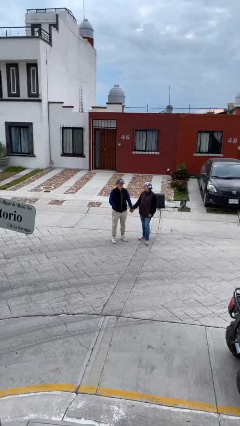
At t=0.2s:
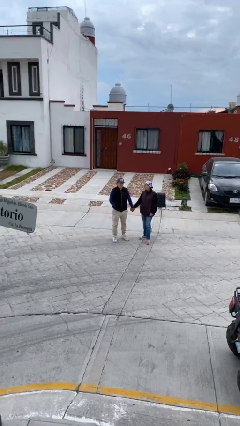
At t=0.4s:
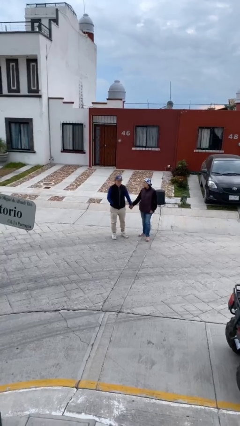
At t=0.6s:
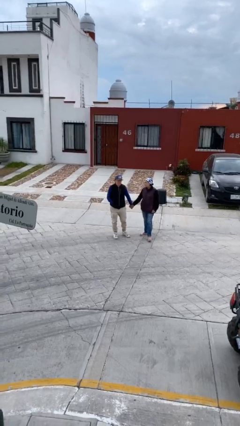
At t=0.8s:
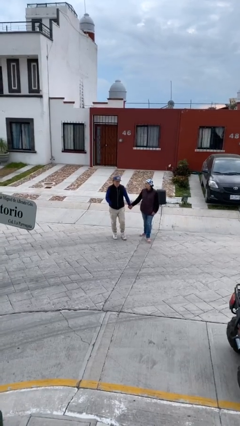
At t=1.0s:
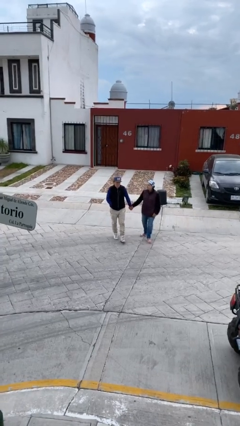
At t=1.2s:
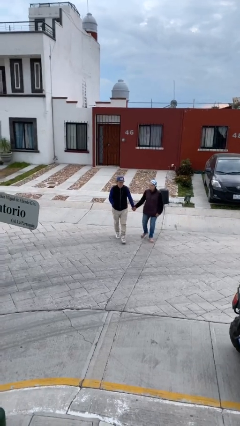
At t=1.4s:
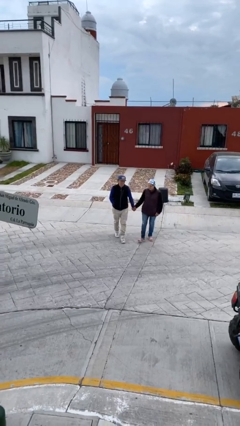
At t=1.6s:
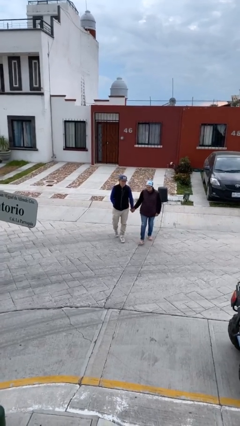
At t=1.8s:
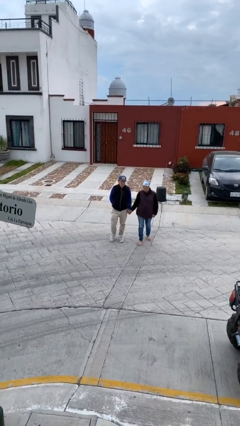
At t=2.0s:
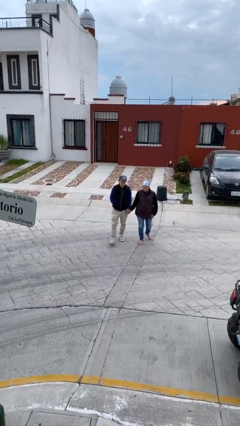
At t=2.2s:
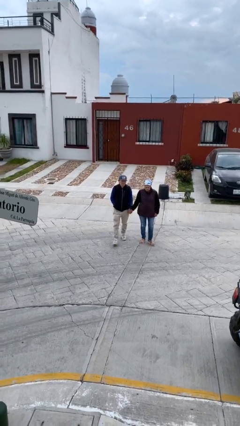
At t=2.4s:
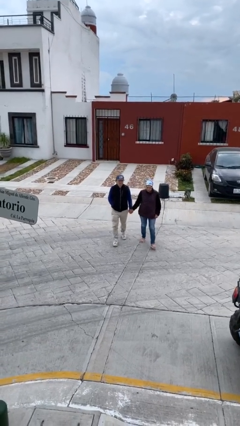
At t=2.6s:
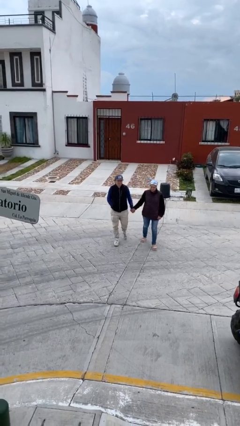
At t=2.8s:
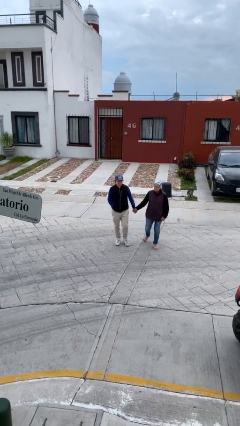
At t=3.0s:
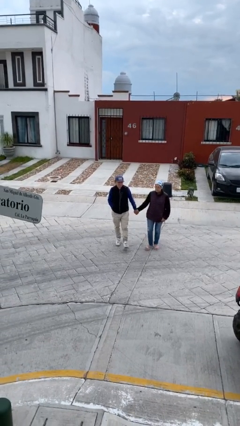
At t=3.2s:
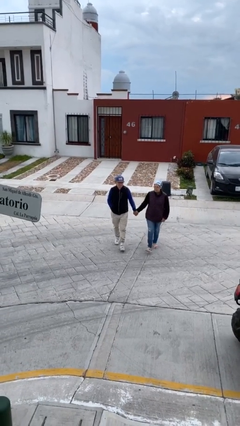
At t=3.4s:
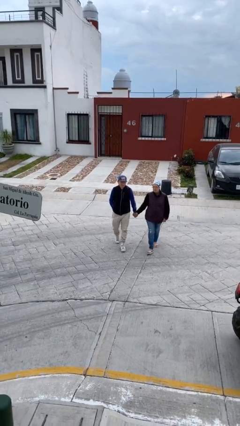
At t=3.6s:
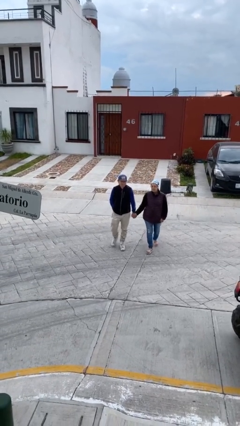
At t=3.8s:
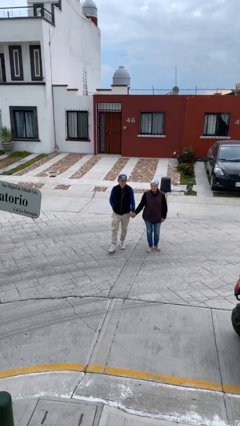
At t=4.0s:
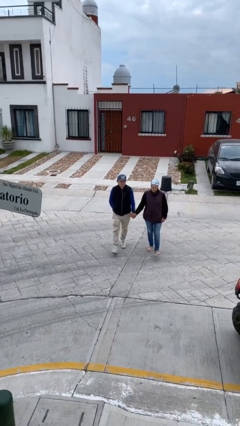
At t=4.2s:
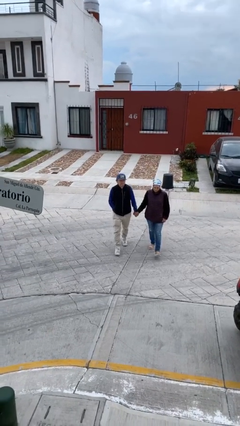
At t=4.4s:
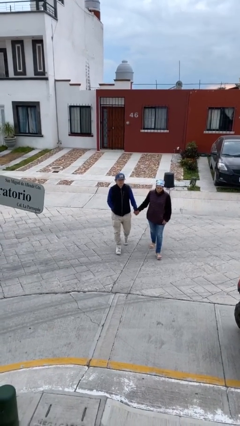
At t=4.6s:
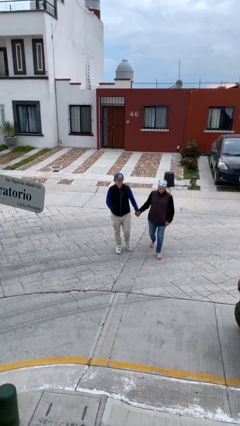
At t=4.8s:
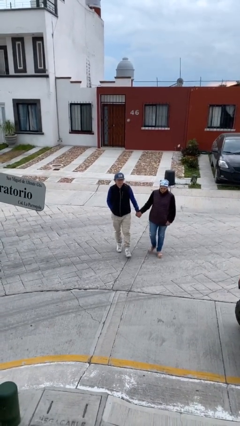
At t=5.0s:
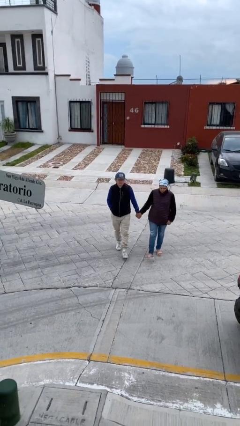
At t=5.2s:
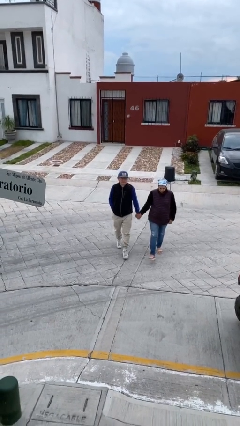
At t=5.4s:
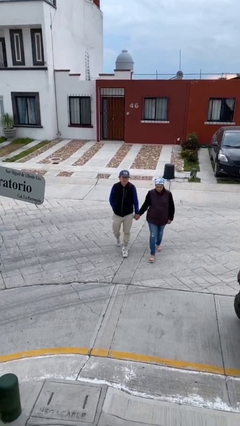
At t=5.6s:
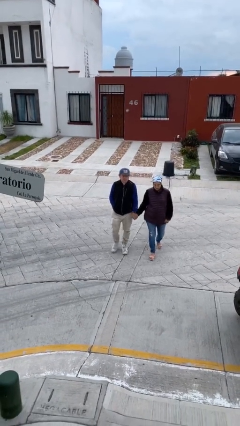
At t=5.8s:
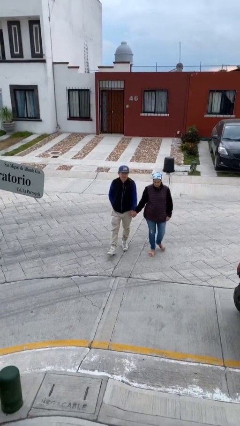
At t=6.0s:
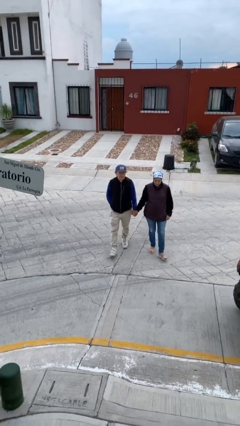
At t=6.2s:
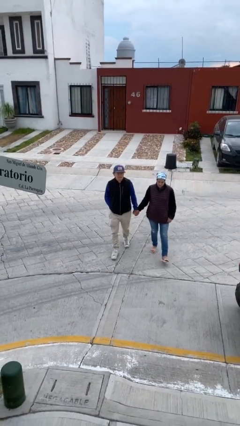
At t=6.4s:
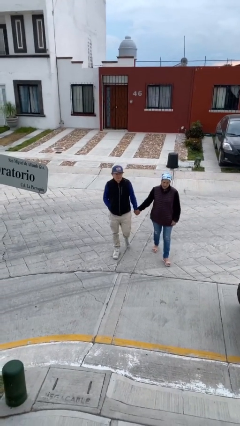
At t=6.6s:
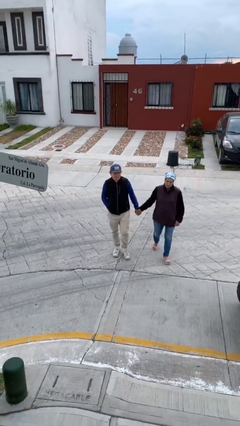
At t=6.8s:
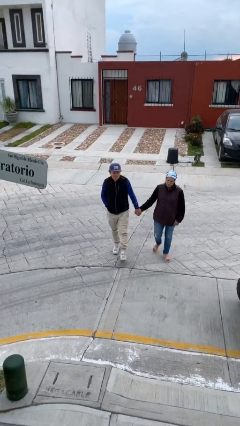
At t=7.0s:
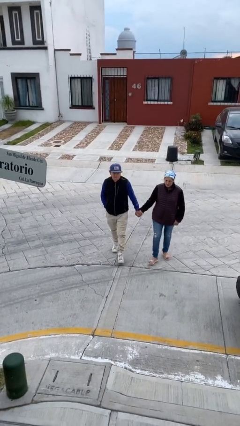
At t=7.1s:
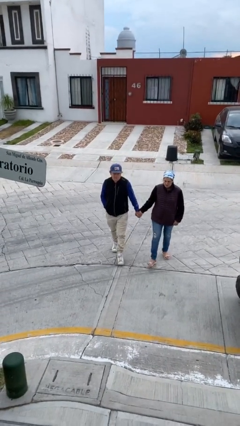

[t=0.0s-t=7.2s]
person holds hand

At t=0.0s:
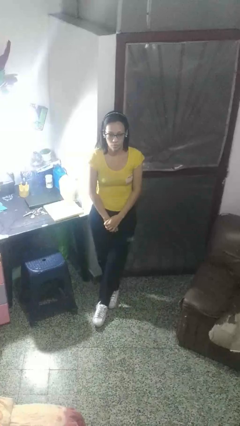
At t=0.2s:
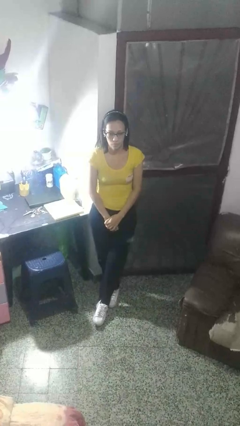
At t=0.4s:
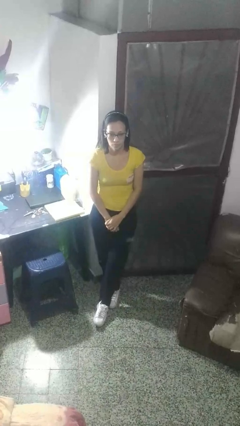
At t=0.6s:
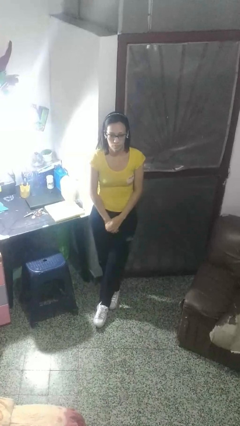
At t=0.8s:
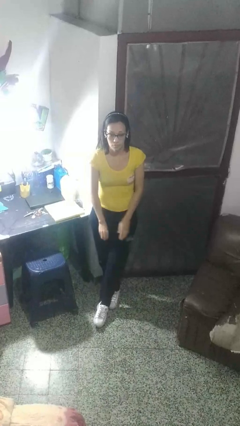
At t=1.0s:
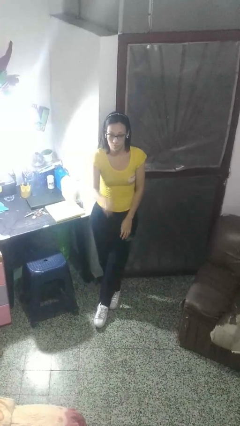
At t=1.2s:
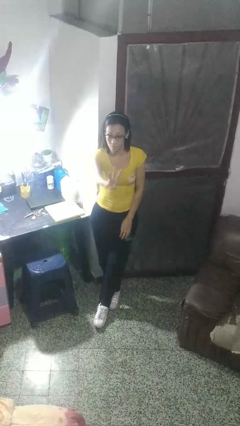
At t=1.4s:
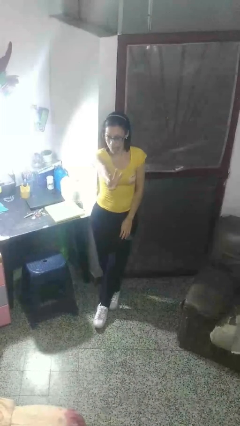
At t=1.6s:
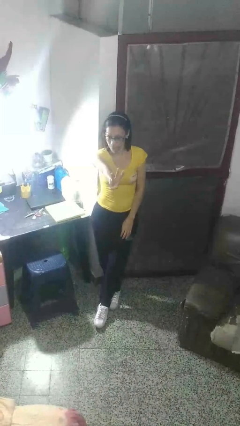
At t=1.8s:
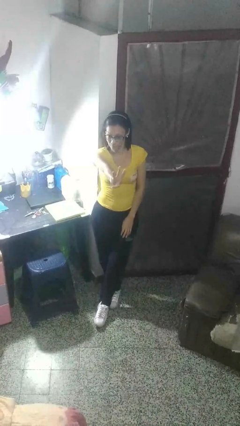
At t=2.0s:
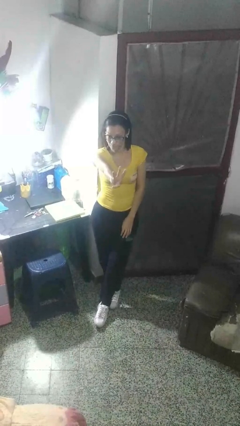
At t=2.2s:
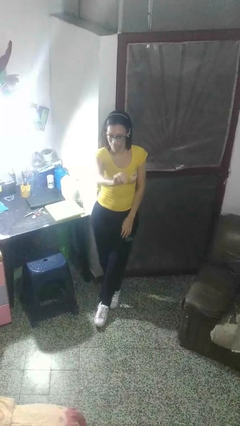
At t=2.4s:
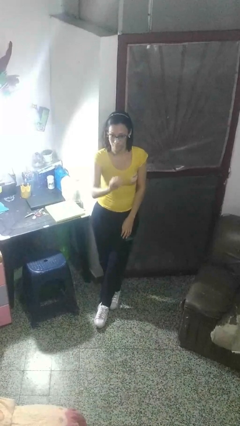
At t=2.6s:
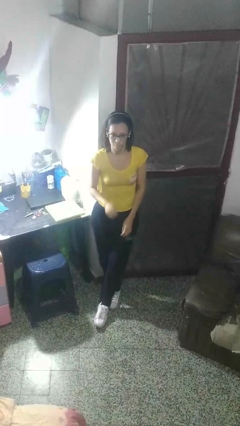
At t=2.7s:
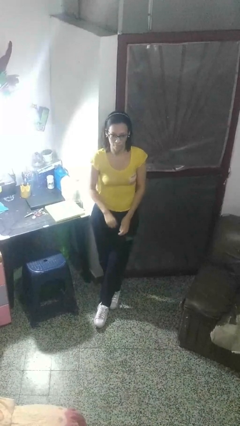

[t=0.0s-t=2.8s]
person gestures number three

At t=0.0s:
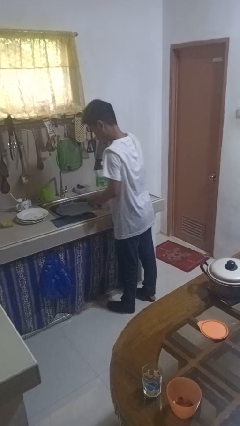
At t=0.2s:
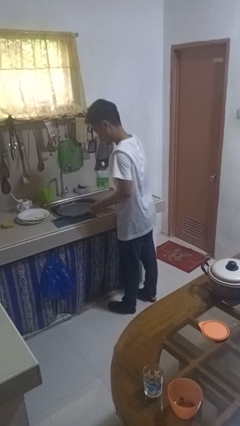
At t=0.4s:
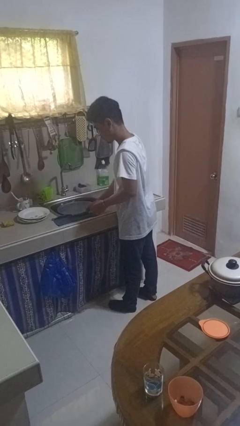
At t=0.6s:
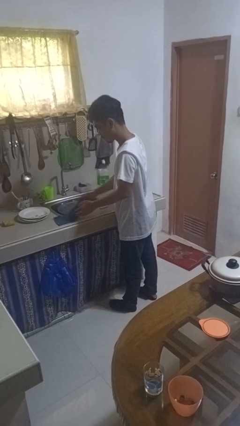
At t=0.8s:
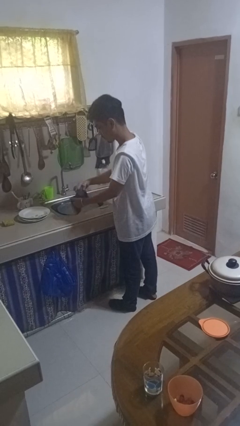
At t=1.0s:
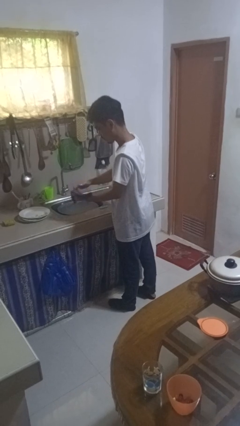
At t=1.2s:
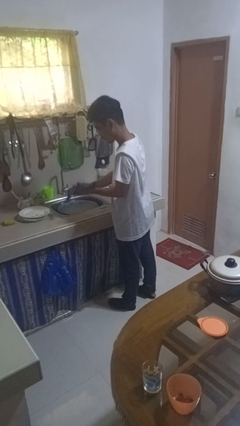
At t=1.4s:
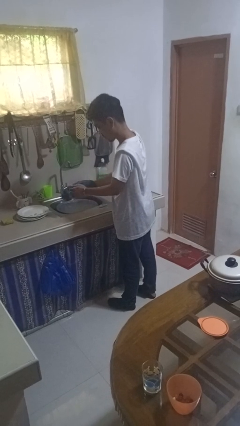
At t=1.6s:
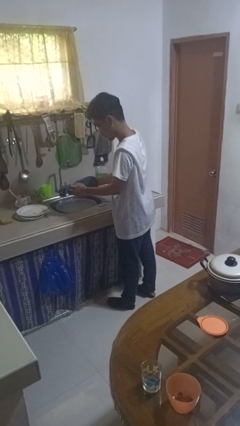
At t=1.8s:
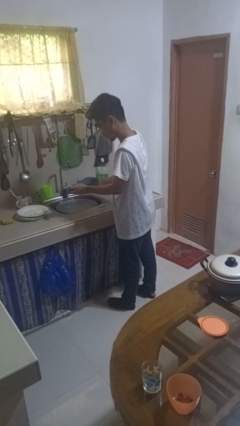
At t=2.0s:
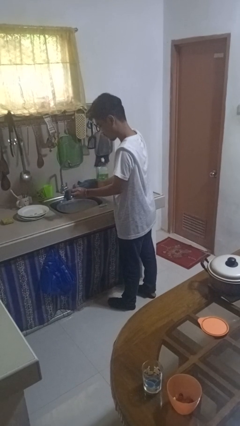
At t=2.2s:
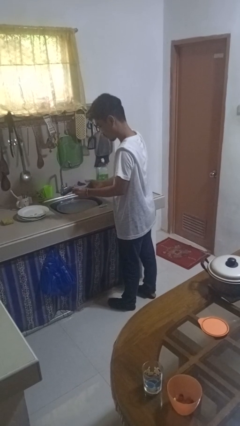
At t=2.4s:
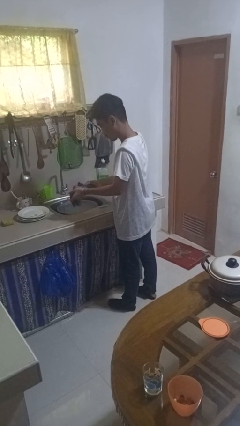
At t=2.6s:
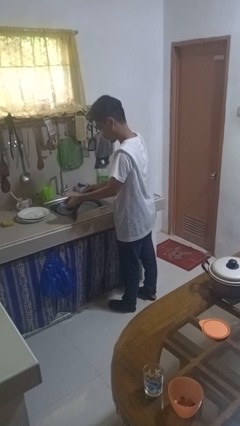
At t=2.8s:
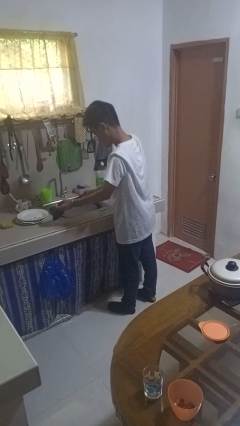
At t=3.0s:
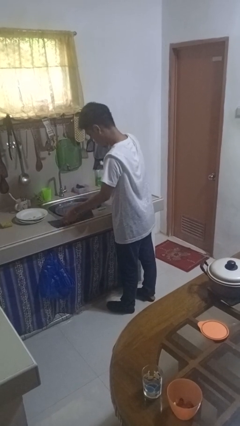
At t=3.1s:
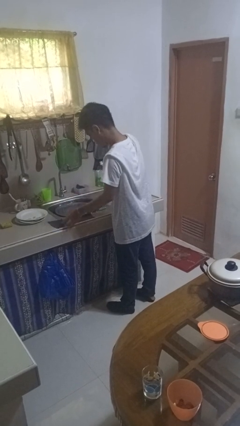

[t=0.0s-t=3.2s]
person dries hands with towel

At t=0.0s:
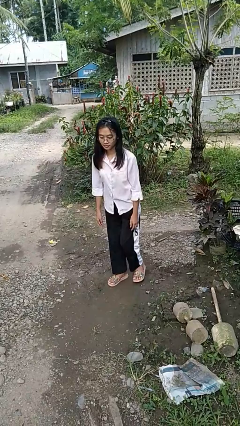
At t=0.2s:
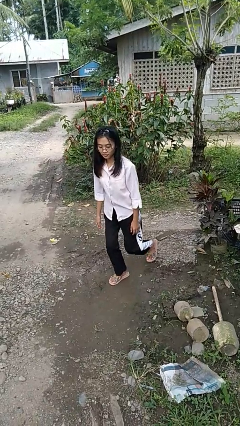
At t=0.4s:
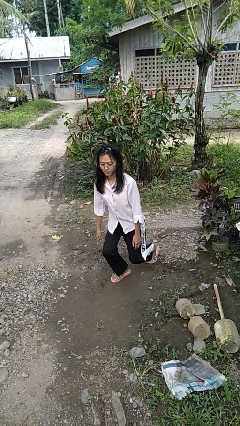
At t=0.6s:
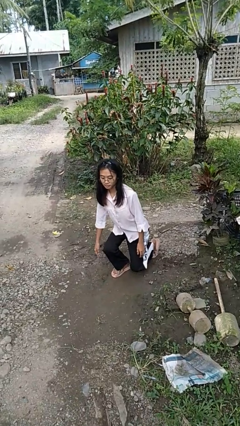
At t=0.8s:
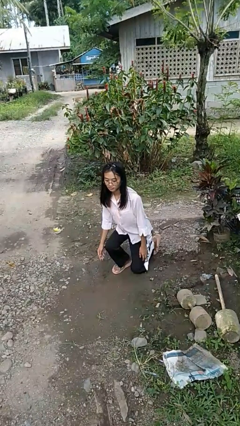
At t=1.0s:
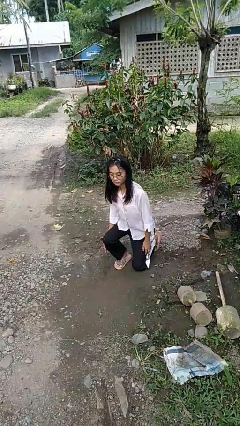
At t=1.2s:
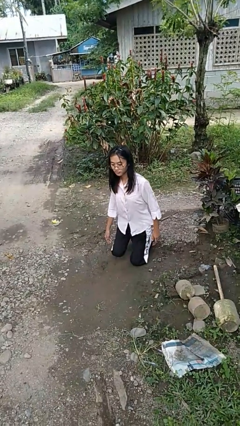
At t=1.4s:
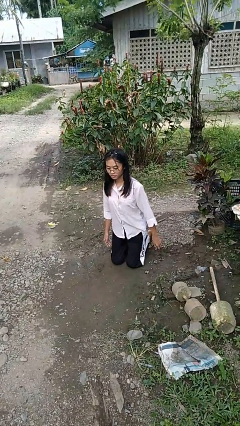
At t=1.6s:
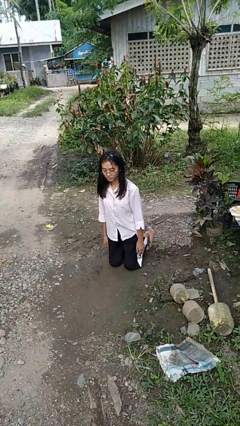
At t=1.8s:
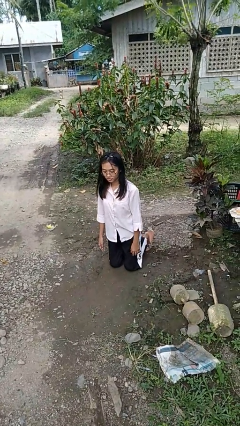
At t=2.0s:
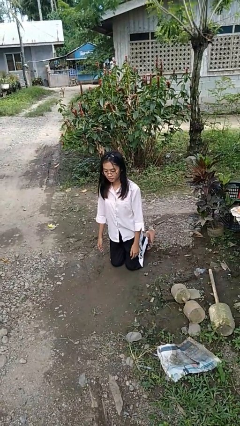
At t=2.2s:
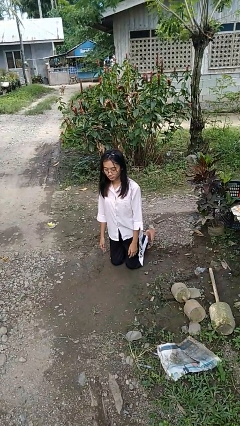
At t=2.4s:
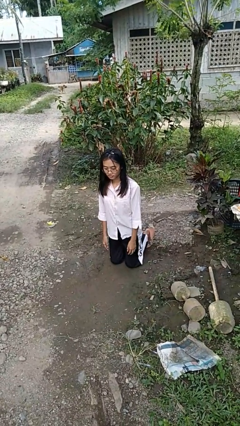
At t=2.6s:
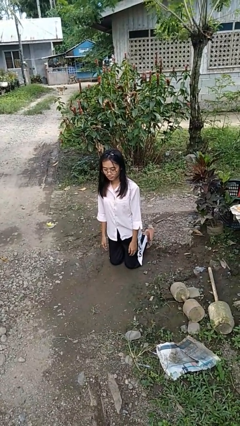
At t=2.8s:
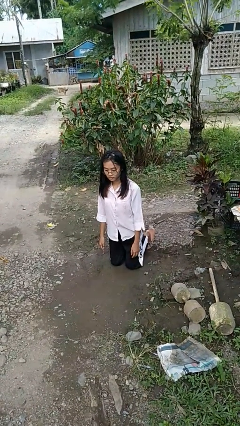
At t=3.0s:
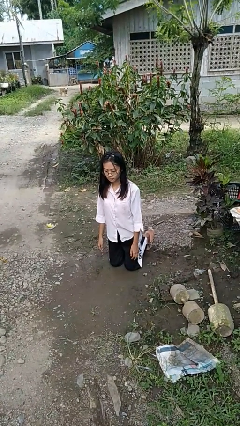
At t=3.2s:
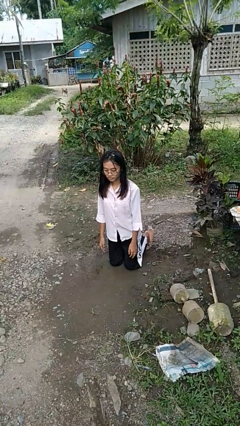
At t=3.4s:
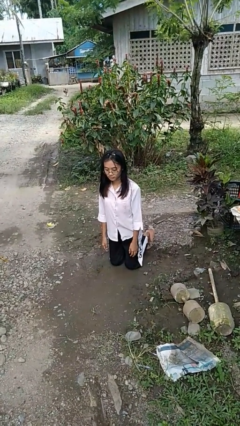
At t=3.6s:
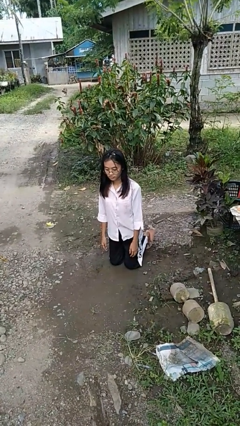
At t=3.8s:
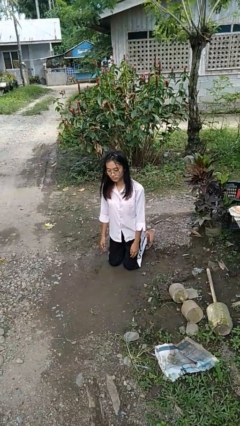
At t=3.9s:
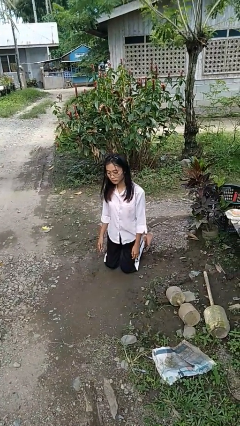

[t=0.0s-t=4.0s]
person kneels

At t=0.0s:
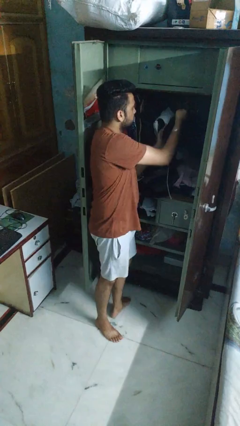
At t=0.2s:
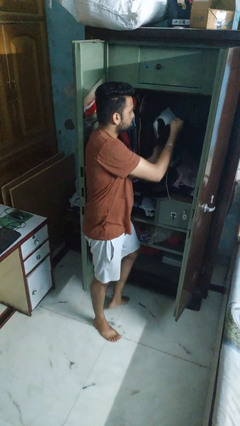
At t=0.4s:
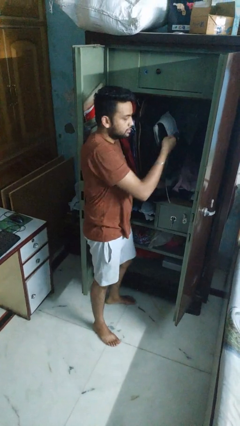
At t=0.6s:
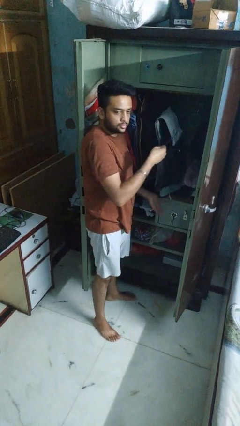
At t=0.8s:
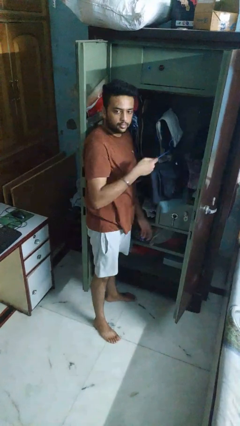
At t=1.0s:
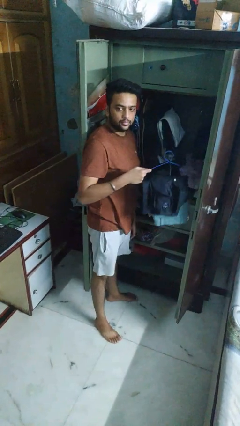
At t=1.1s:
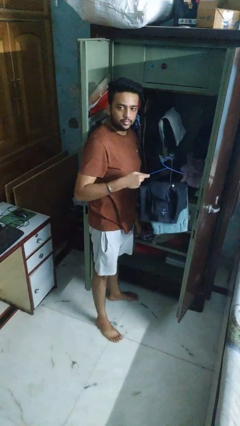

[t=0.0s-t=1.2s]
person takes clothes from closet
